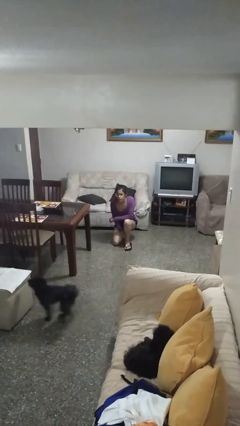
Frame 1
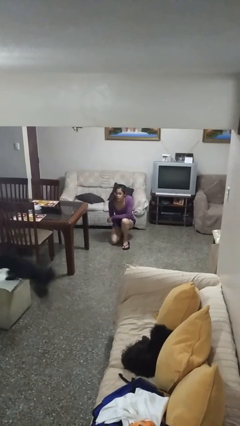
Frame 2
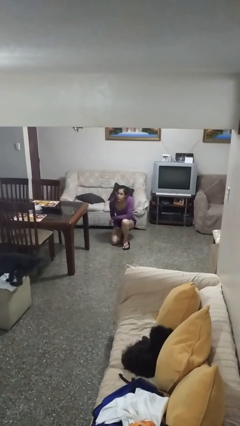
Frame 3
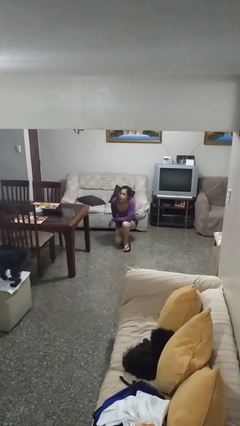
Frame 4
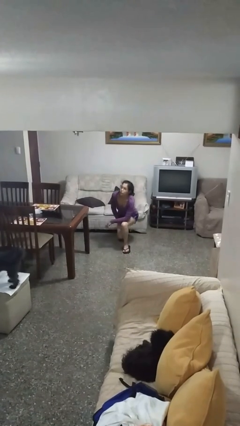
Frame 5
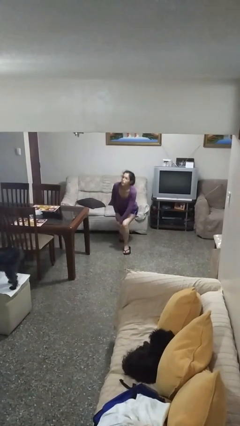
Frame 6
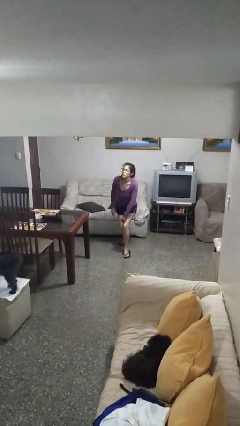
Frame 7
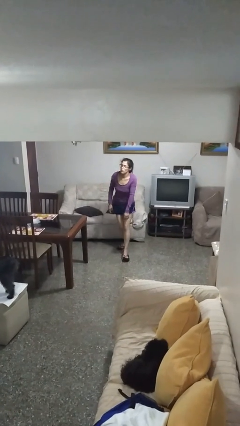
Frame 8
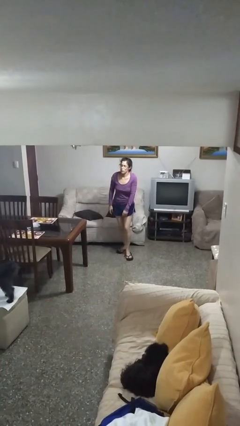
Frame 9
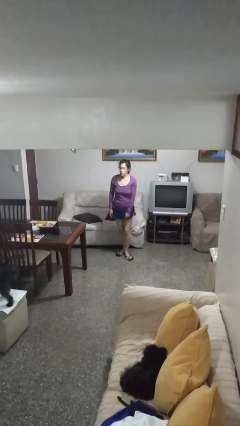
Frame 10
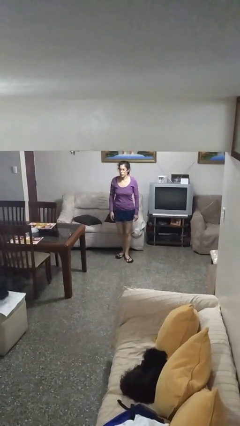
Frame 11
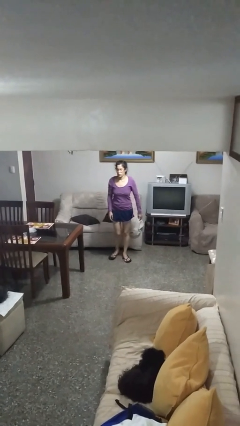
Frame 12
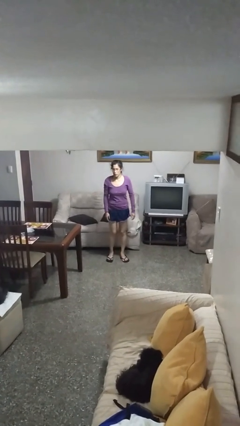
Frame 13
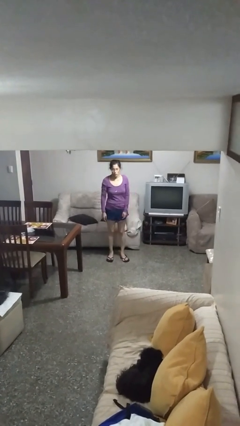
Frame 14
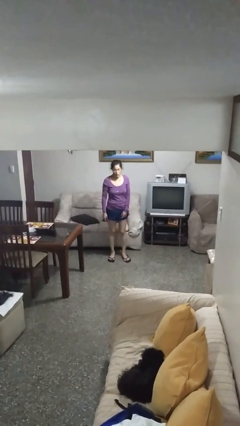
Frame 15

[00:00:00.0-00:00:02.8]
person stands up from floor

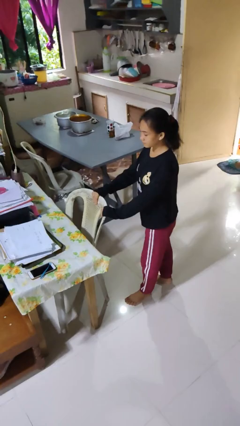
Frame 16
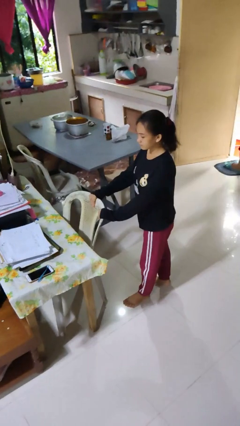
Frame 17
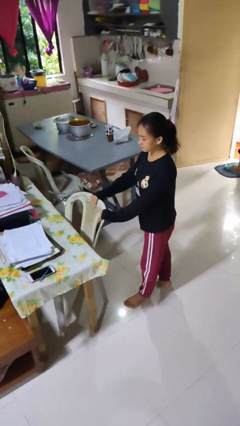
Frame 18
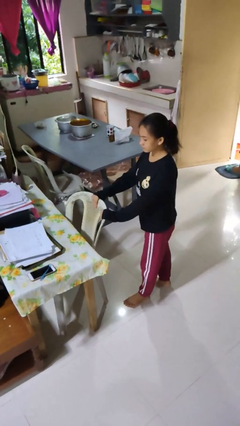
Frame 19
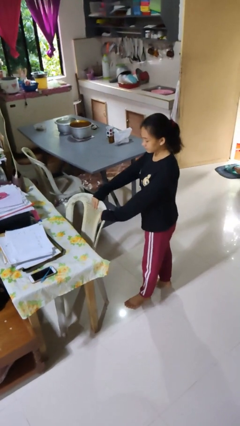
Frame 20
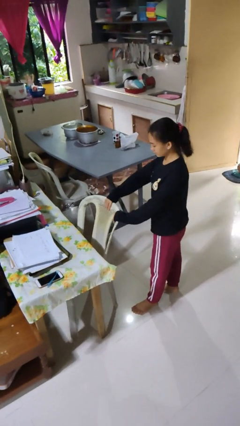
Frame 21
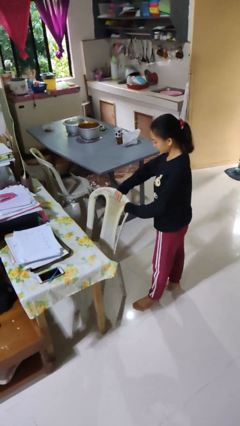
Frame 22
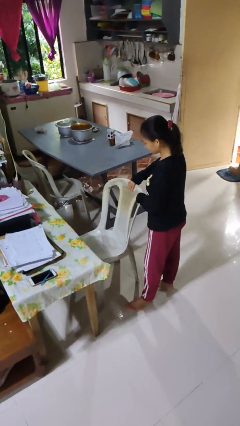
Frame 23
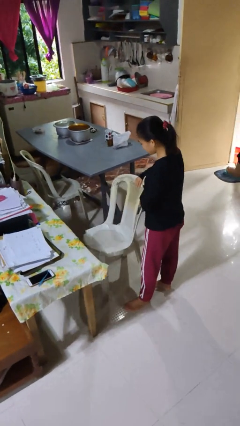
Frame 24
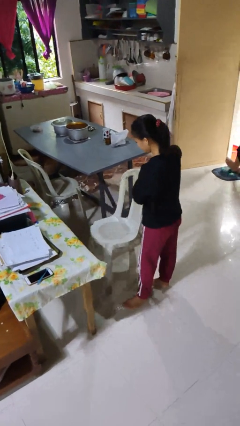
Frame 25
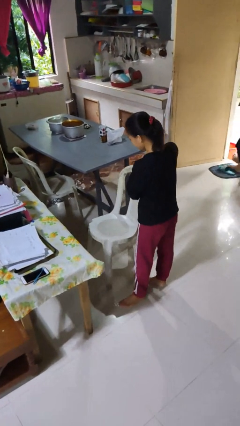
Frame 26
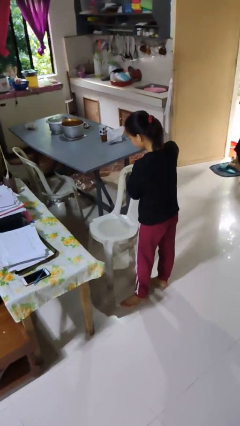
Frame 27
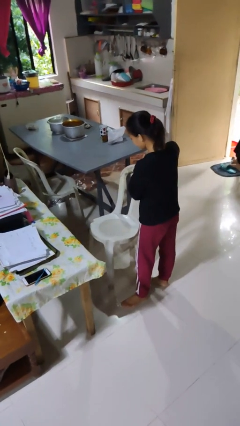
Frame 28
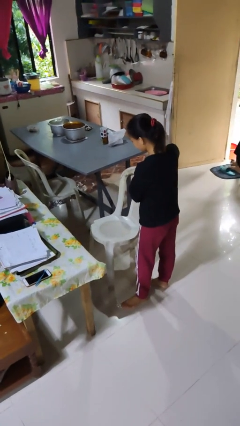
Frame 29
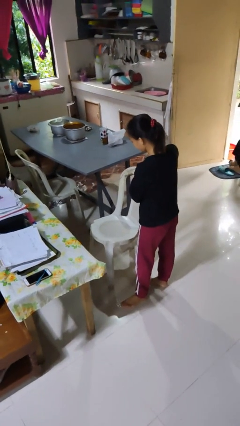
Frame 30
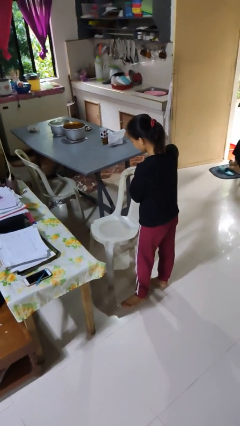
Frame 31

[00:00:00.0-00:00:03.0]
person pulls out chair

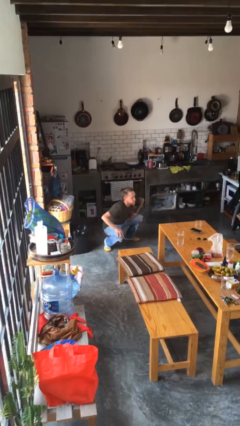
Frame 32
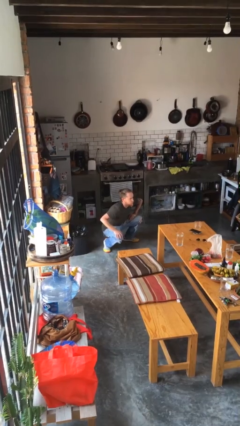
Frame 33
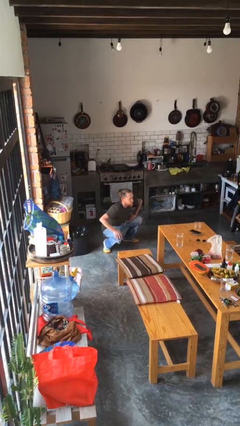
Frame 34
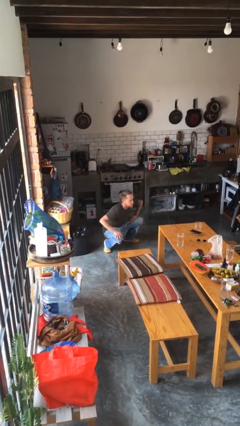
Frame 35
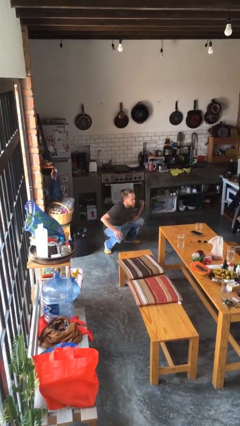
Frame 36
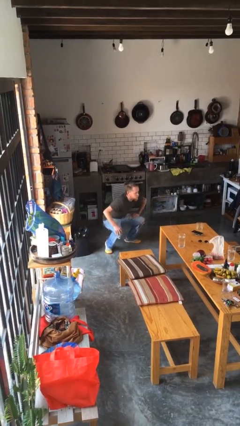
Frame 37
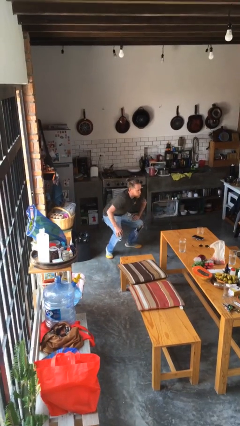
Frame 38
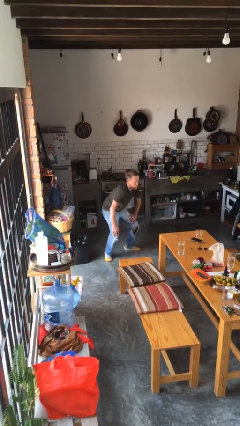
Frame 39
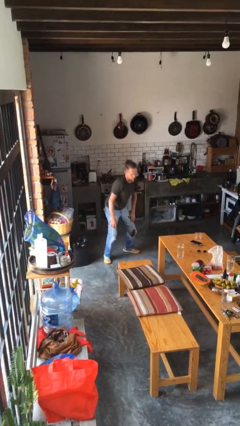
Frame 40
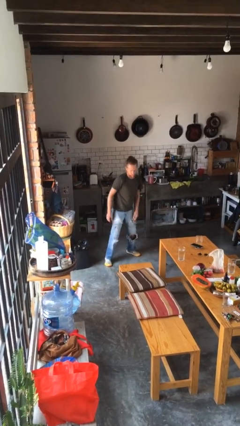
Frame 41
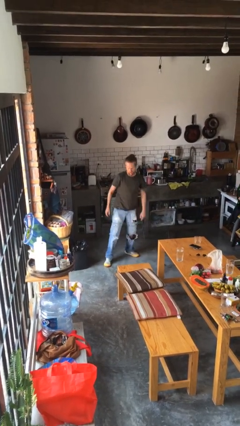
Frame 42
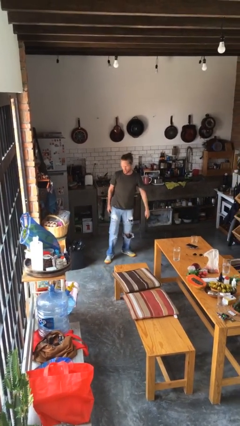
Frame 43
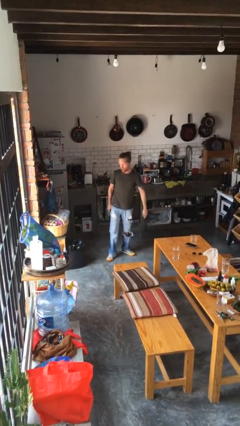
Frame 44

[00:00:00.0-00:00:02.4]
person stands up

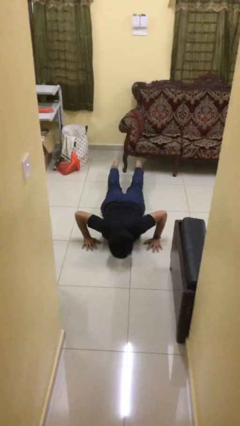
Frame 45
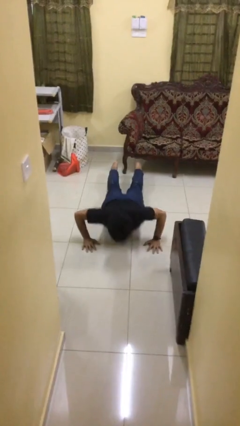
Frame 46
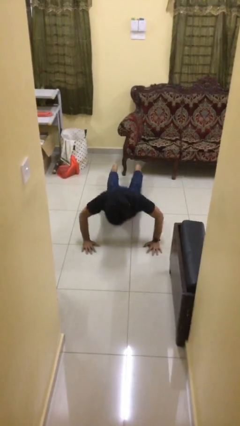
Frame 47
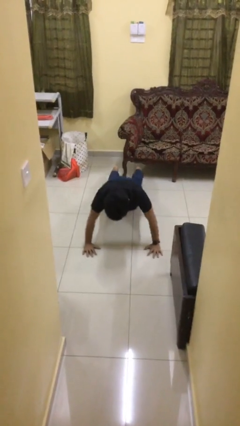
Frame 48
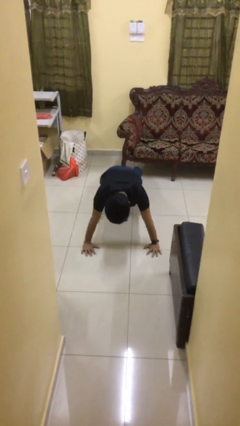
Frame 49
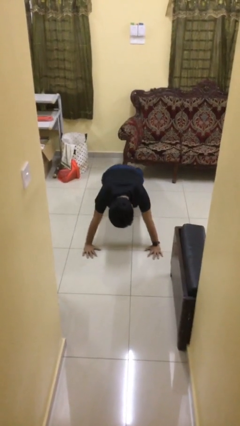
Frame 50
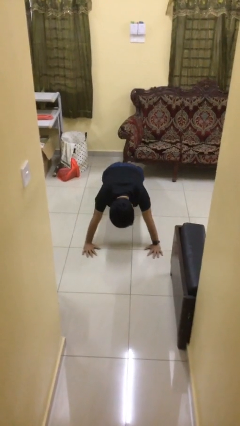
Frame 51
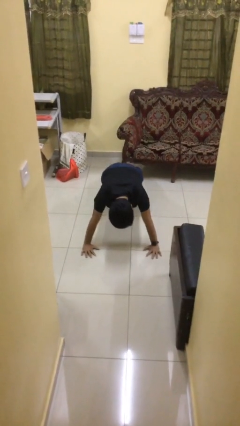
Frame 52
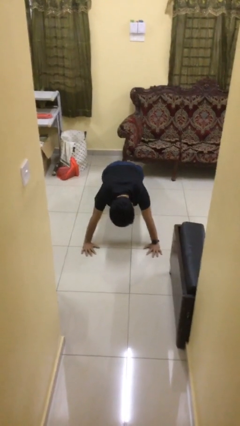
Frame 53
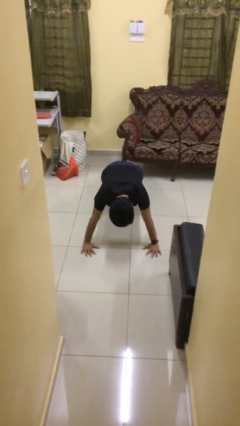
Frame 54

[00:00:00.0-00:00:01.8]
person exercises with pushup

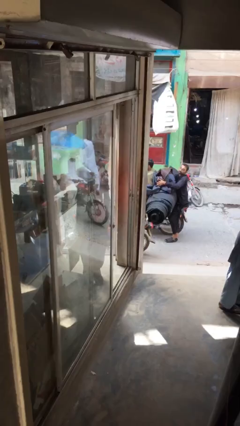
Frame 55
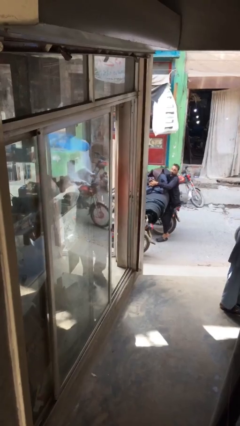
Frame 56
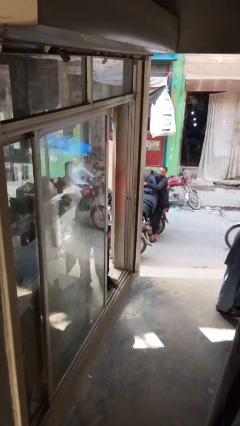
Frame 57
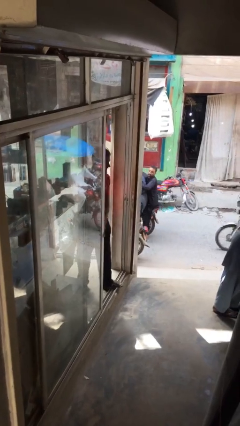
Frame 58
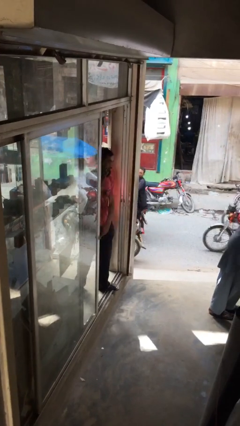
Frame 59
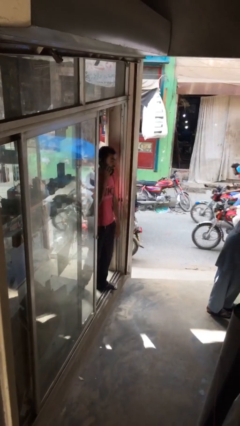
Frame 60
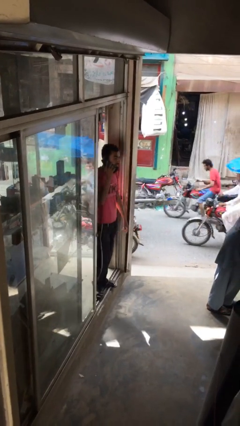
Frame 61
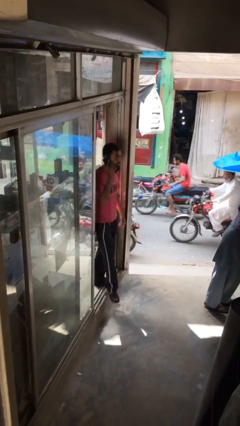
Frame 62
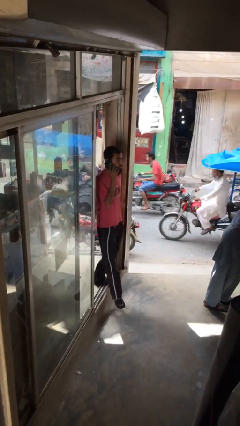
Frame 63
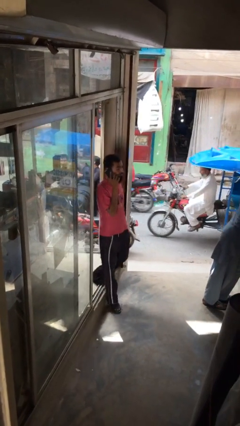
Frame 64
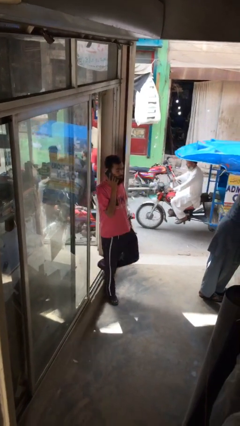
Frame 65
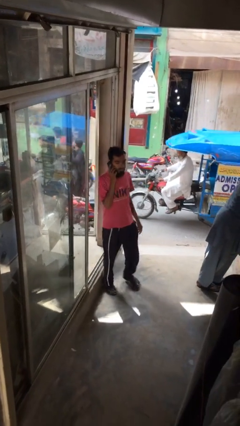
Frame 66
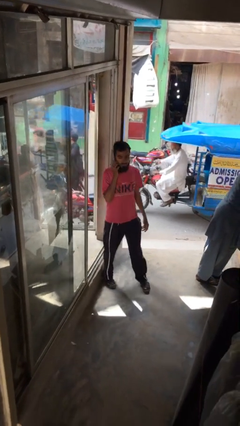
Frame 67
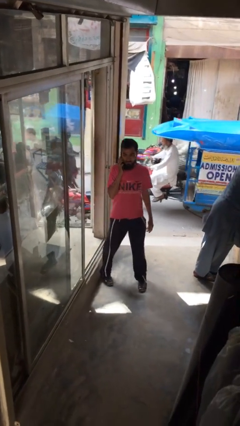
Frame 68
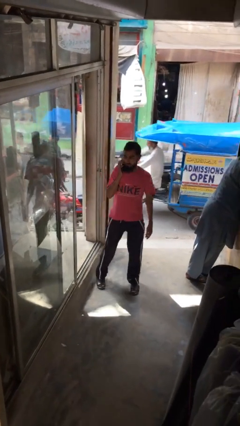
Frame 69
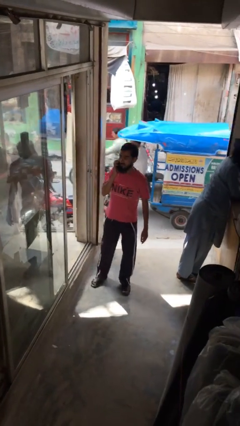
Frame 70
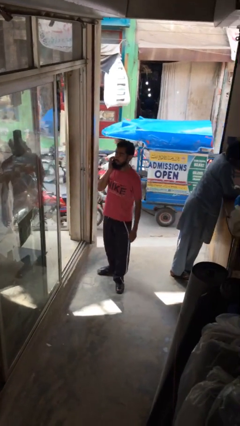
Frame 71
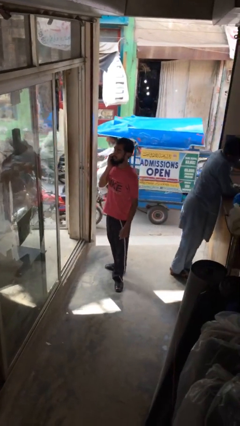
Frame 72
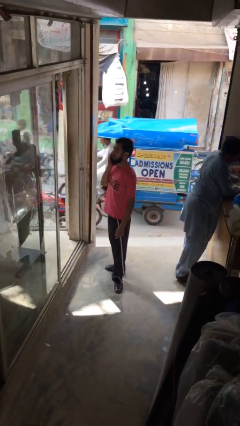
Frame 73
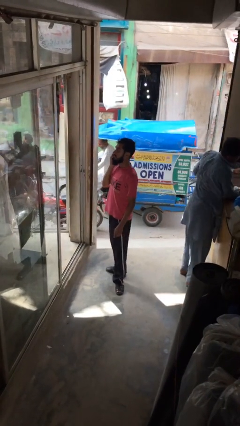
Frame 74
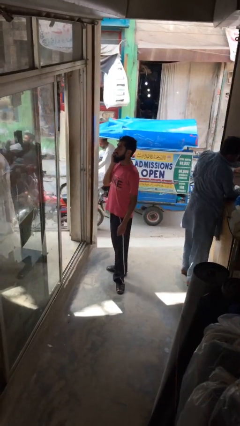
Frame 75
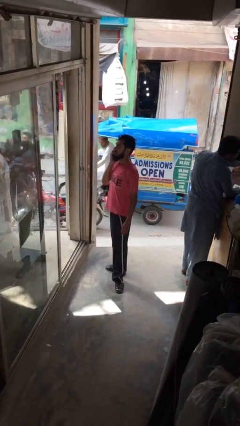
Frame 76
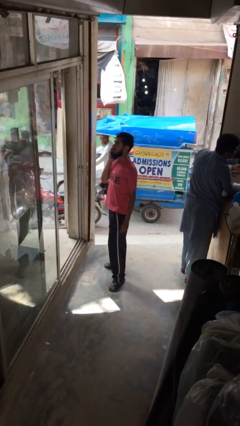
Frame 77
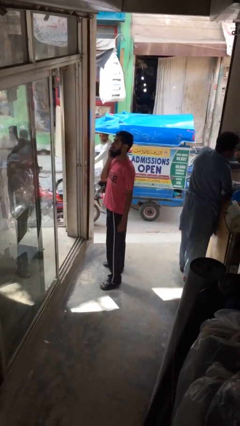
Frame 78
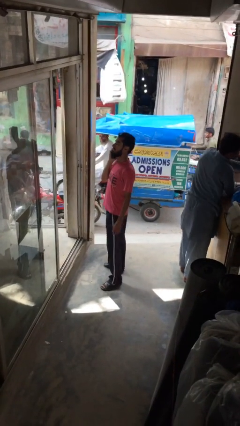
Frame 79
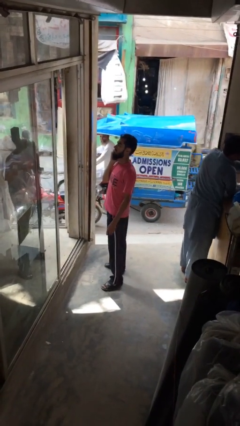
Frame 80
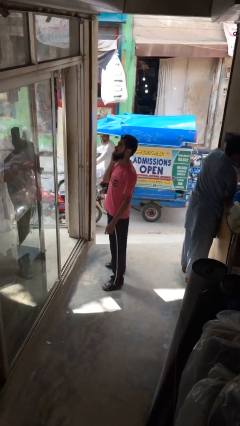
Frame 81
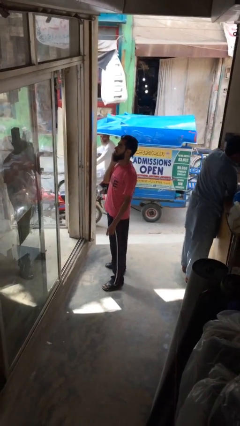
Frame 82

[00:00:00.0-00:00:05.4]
person enters scene through structure

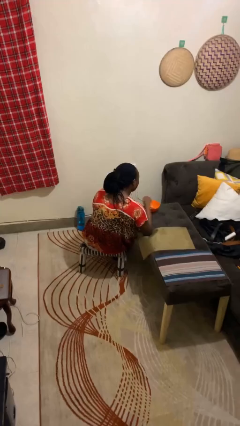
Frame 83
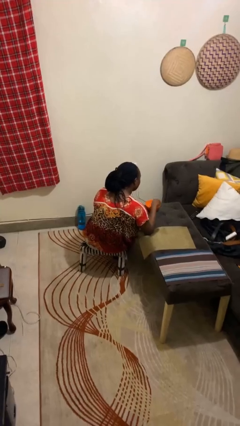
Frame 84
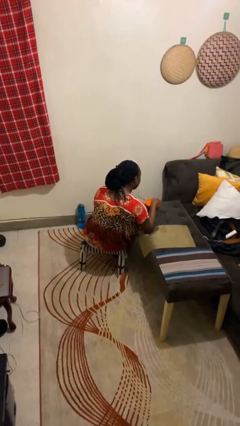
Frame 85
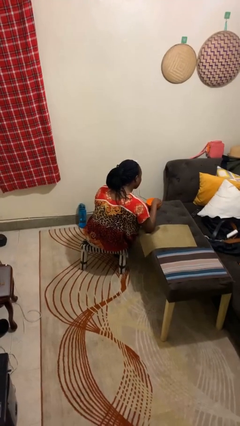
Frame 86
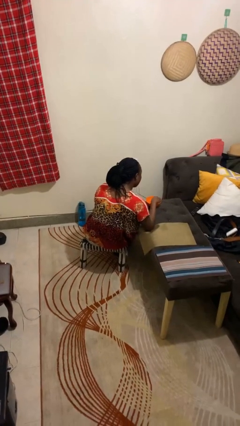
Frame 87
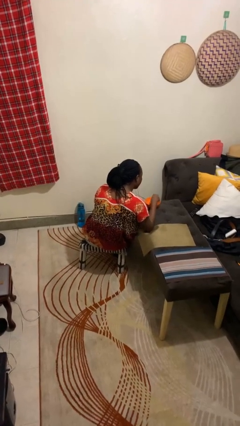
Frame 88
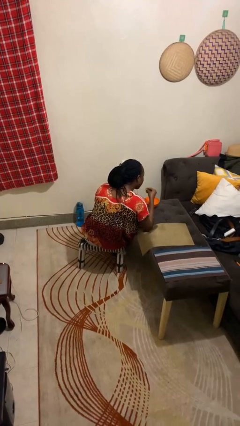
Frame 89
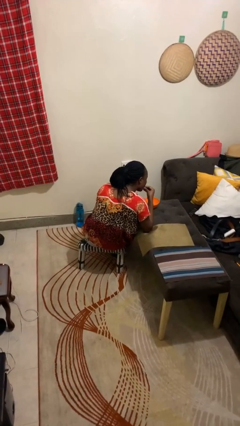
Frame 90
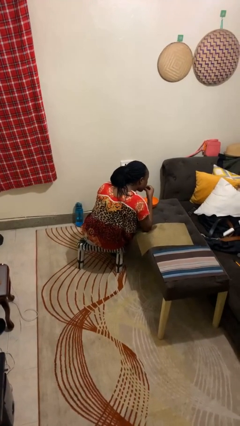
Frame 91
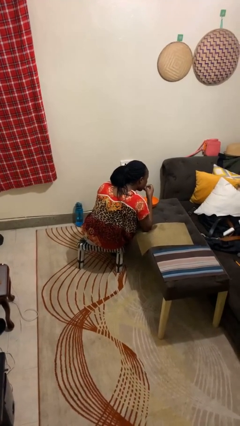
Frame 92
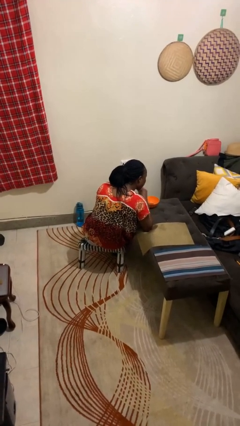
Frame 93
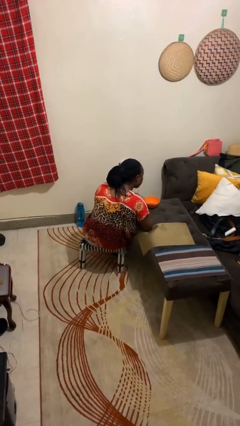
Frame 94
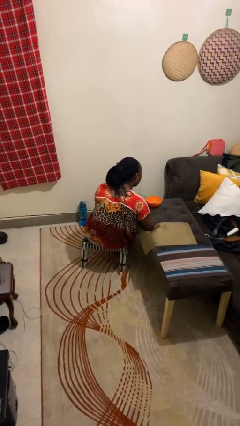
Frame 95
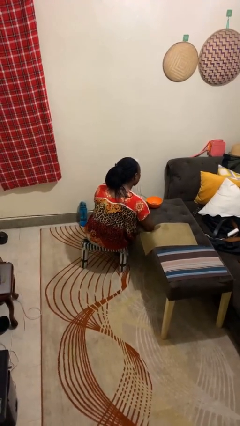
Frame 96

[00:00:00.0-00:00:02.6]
person eats with hands
